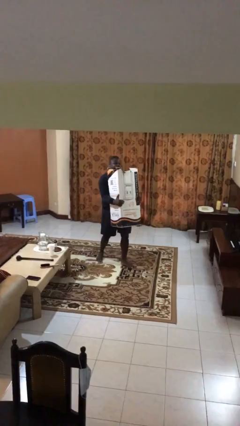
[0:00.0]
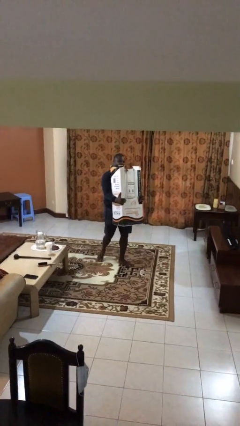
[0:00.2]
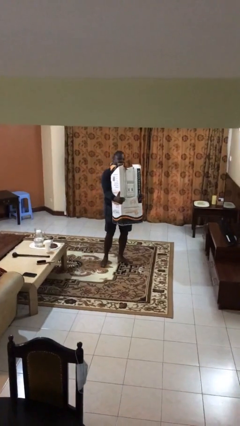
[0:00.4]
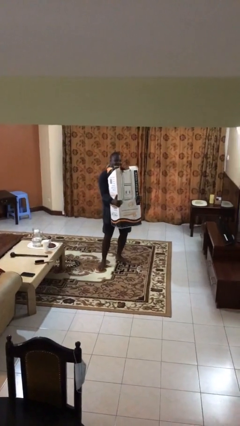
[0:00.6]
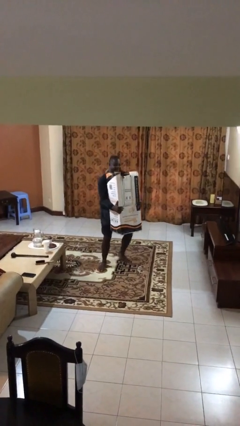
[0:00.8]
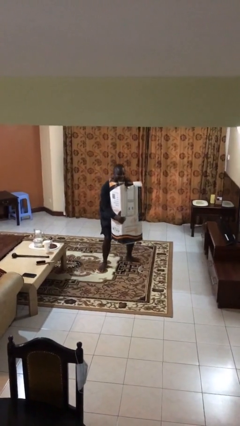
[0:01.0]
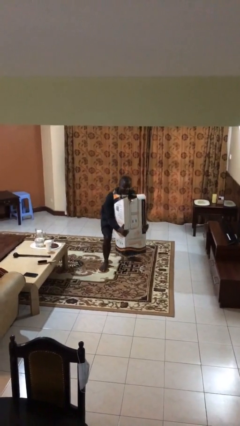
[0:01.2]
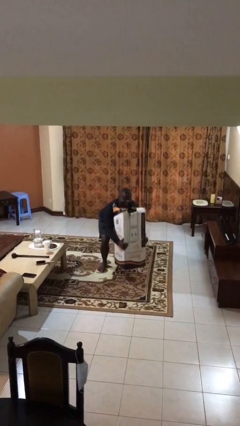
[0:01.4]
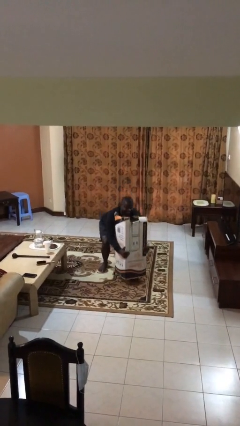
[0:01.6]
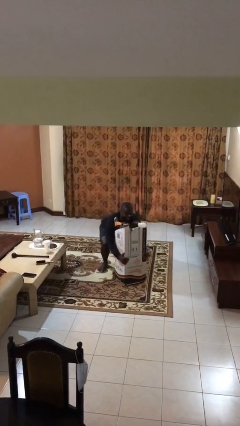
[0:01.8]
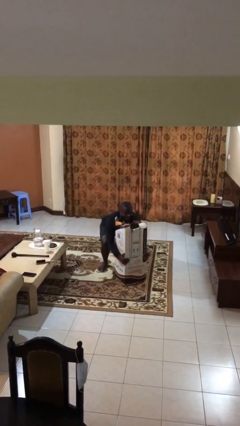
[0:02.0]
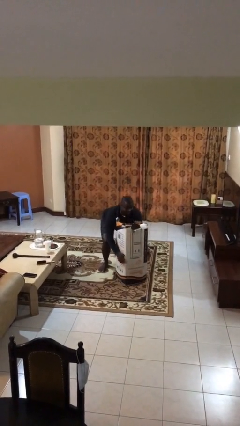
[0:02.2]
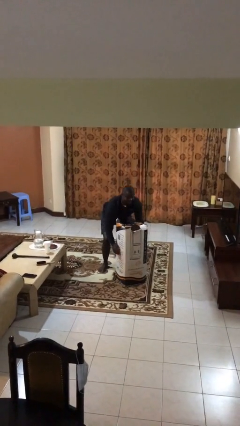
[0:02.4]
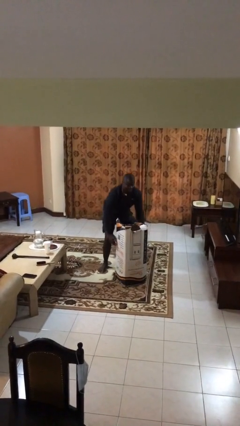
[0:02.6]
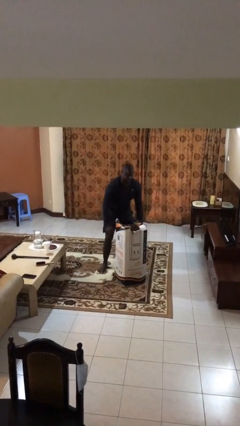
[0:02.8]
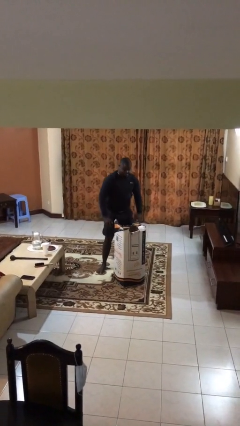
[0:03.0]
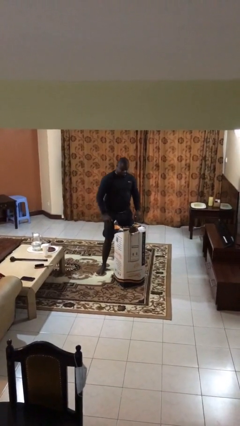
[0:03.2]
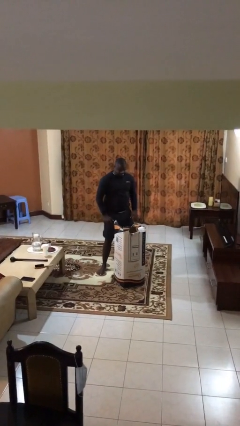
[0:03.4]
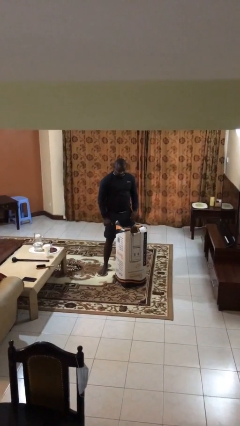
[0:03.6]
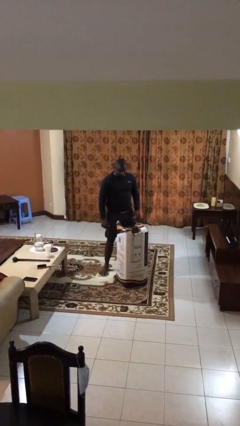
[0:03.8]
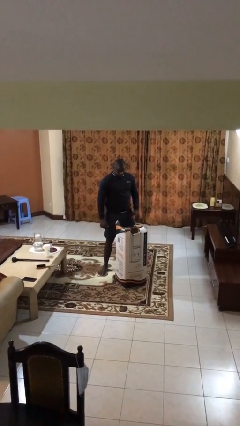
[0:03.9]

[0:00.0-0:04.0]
person puts down object on floor

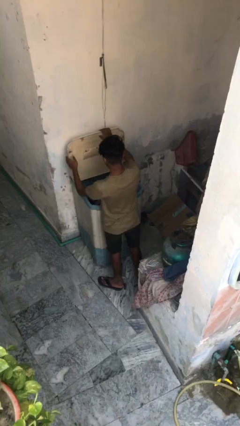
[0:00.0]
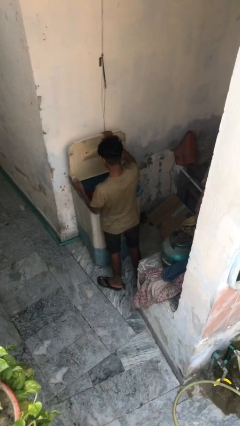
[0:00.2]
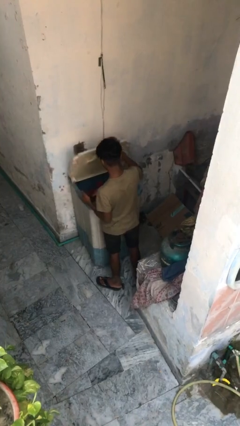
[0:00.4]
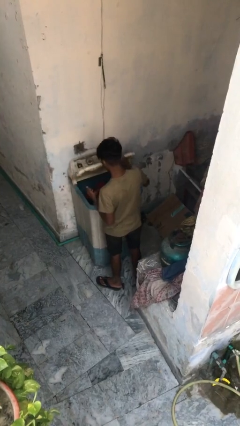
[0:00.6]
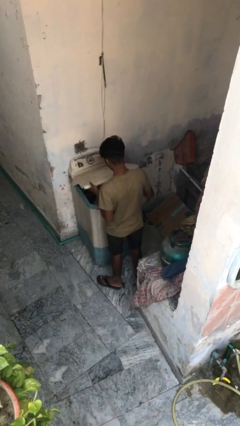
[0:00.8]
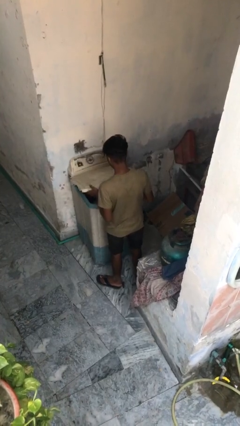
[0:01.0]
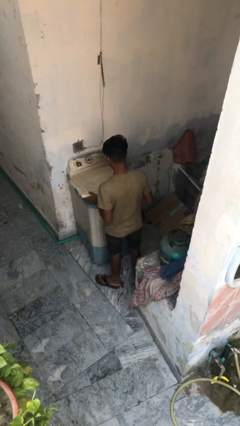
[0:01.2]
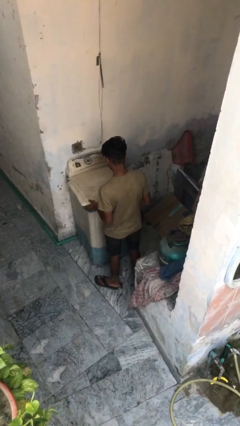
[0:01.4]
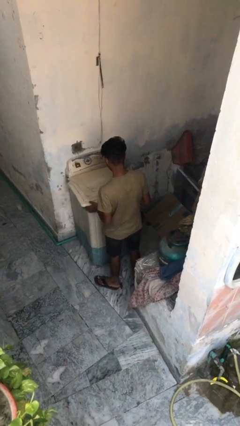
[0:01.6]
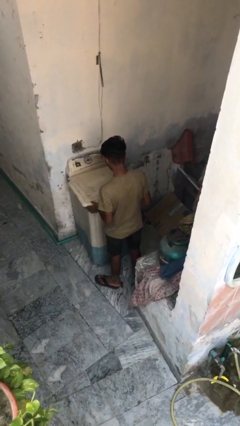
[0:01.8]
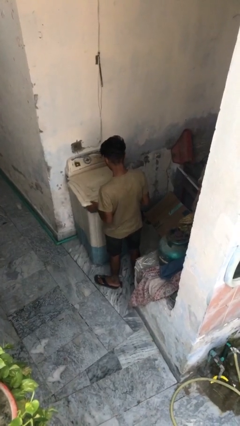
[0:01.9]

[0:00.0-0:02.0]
person closes clothes washer

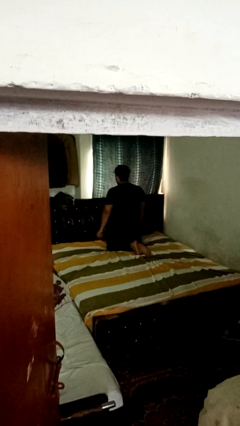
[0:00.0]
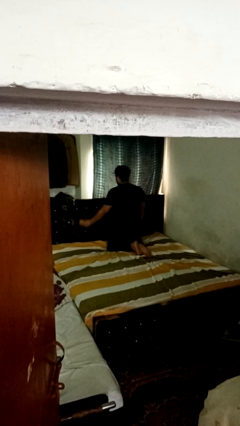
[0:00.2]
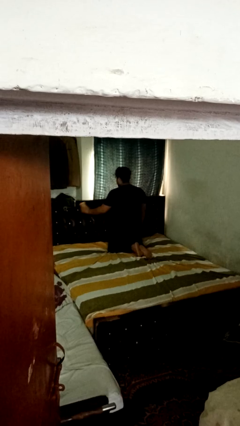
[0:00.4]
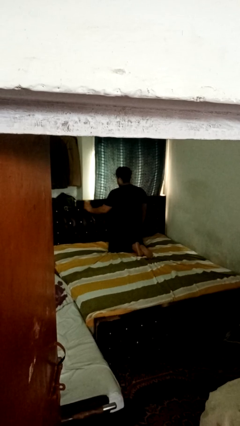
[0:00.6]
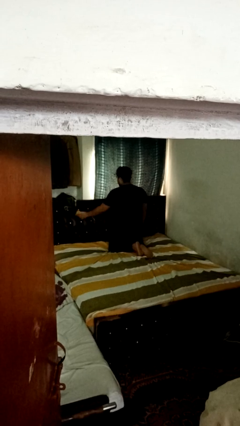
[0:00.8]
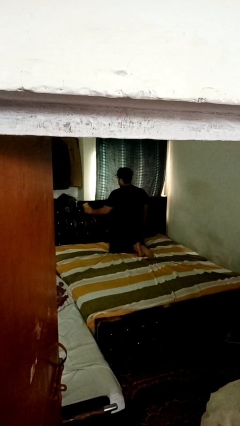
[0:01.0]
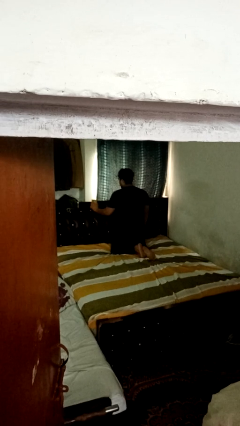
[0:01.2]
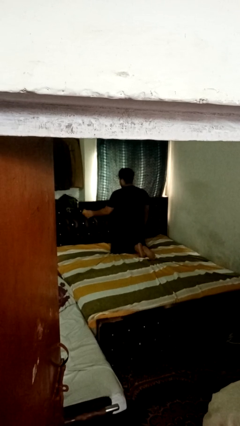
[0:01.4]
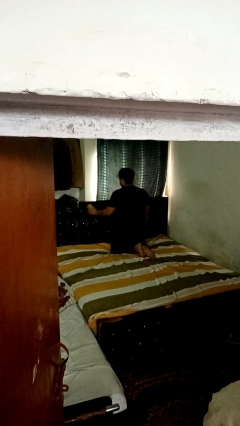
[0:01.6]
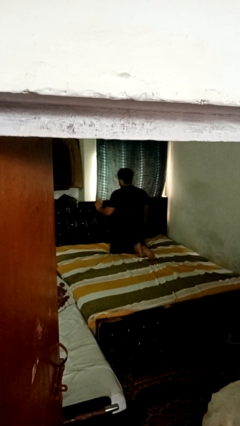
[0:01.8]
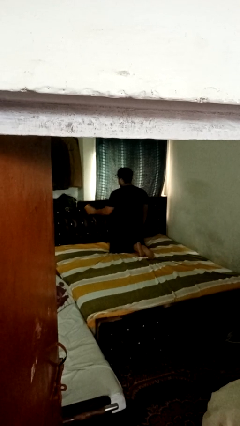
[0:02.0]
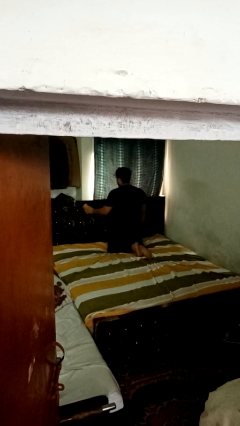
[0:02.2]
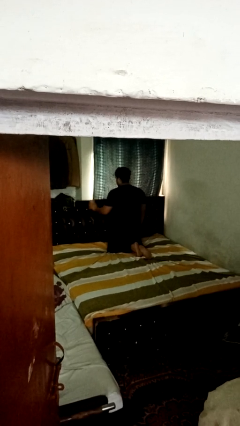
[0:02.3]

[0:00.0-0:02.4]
person dusts furniture

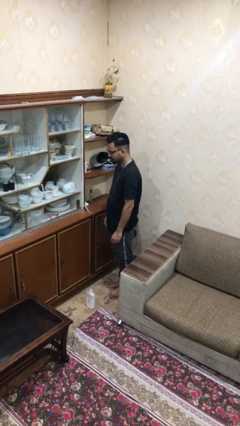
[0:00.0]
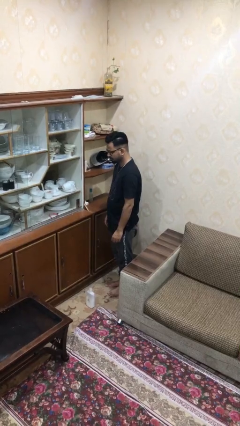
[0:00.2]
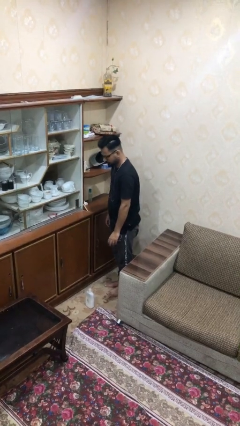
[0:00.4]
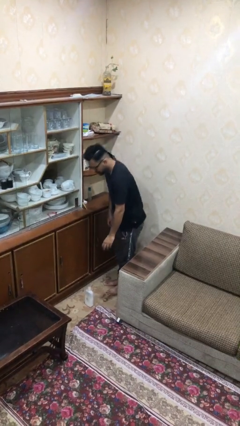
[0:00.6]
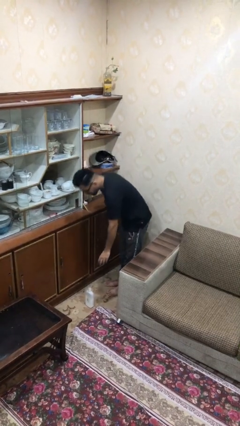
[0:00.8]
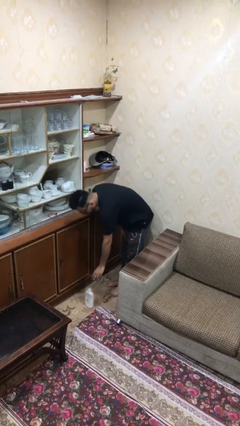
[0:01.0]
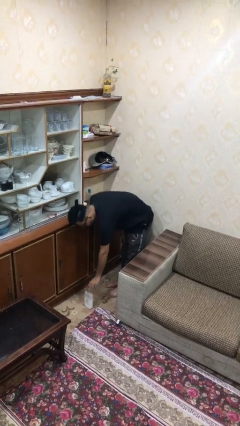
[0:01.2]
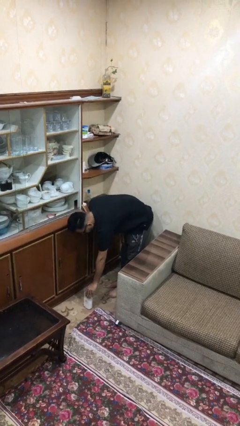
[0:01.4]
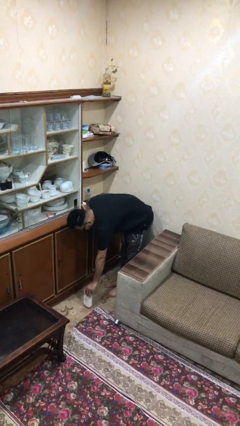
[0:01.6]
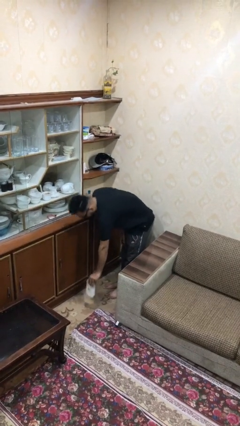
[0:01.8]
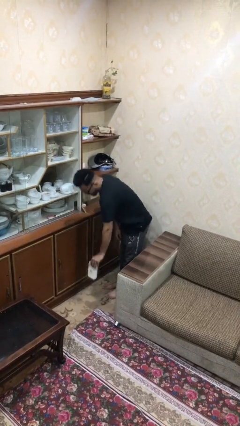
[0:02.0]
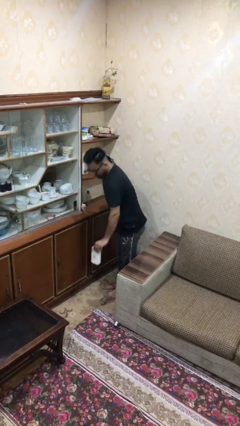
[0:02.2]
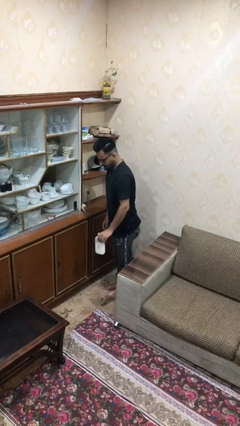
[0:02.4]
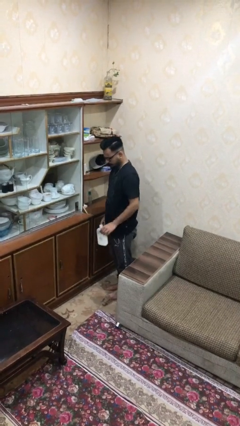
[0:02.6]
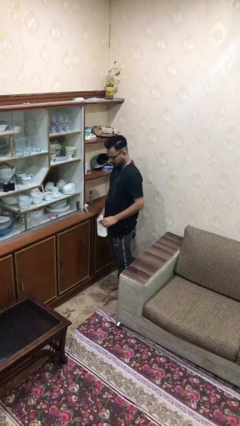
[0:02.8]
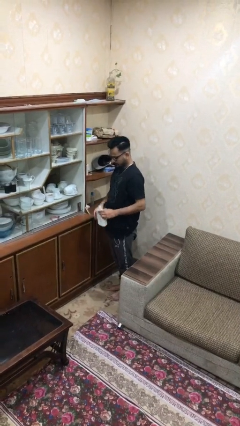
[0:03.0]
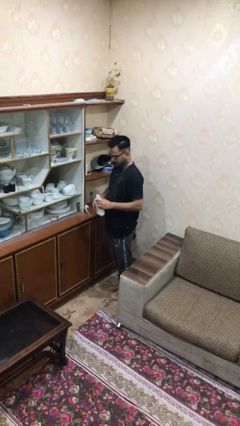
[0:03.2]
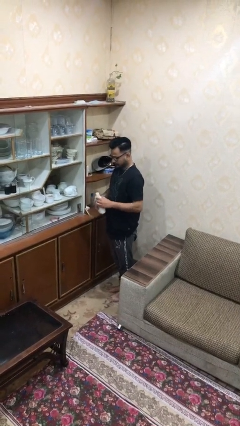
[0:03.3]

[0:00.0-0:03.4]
person picks up object from floor

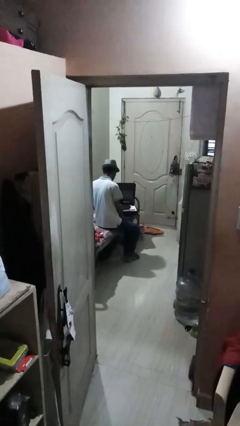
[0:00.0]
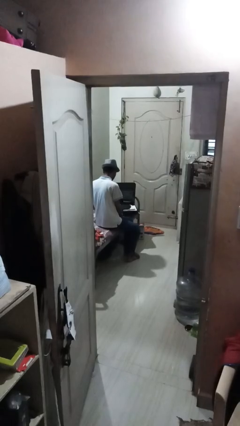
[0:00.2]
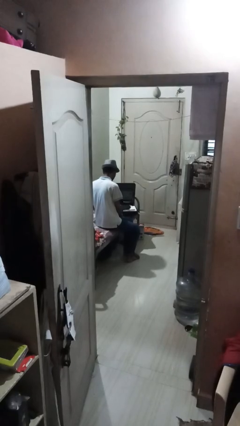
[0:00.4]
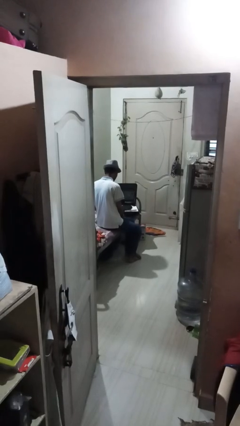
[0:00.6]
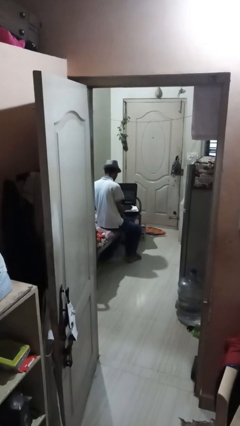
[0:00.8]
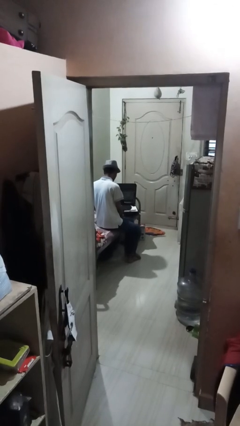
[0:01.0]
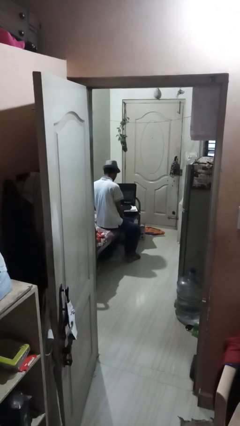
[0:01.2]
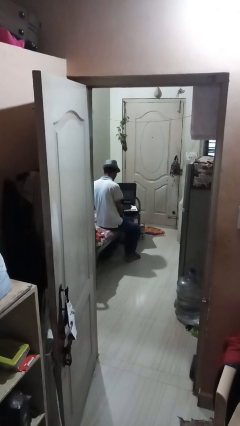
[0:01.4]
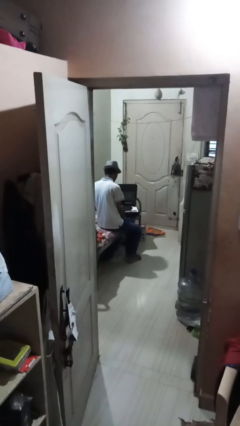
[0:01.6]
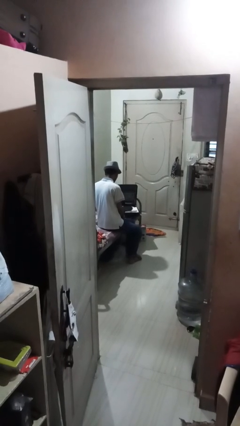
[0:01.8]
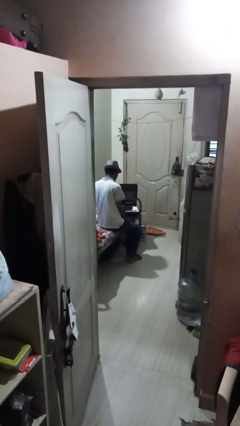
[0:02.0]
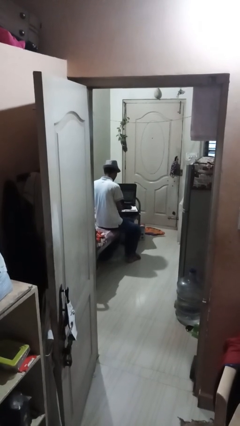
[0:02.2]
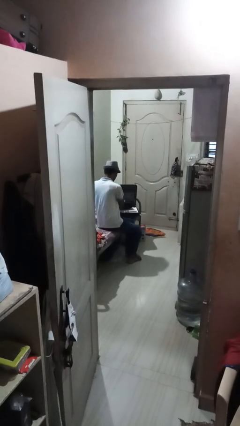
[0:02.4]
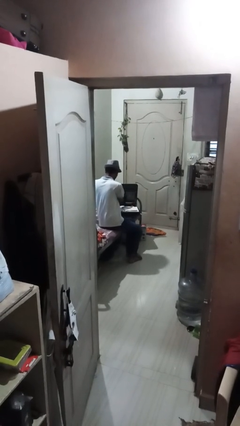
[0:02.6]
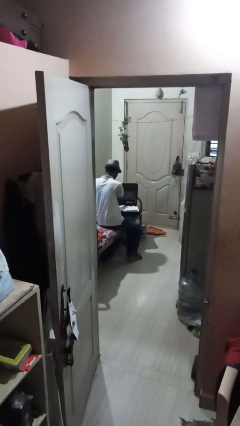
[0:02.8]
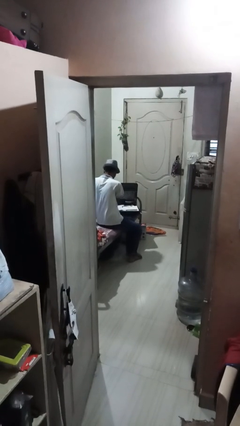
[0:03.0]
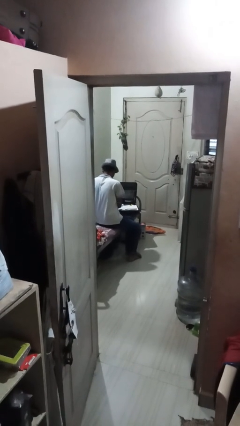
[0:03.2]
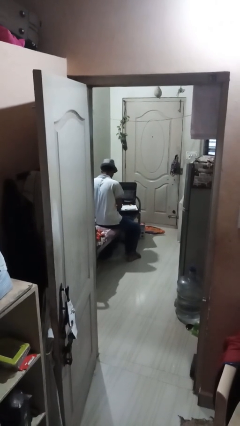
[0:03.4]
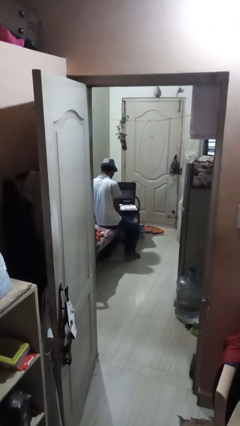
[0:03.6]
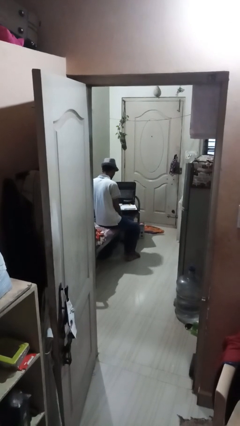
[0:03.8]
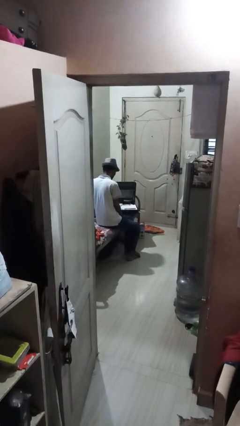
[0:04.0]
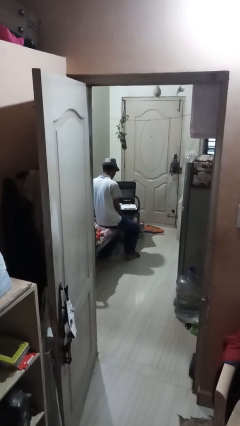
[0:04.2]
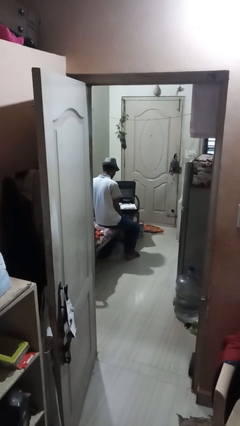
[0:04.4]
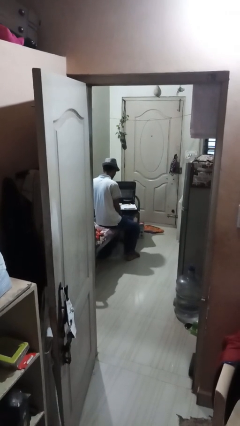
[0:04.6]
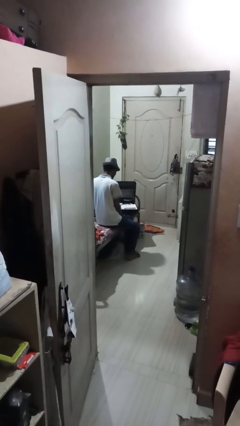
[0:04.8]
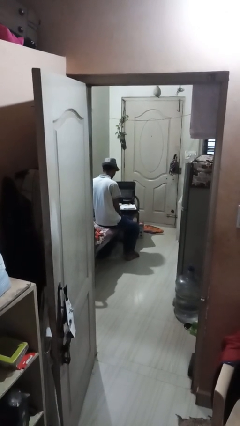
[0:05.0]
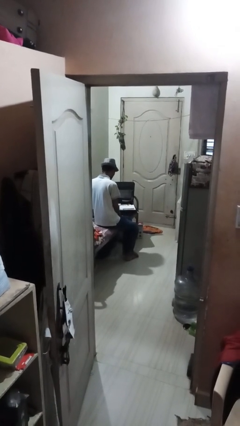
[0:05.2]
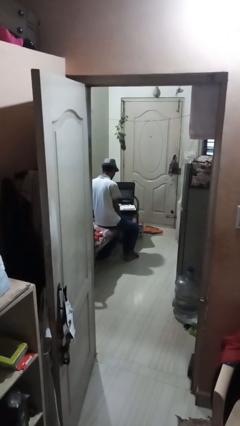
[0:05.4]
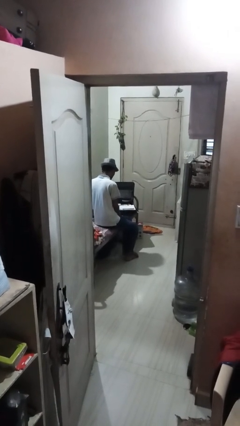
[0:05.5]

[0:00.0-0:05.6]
person unloads clothes from suitcase
